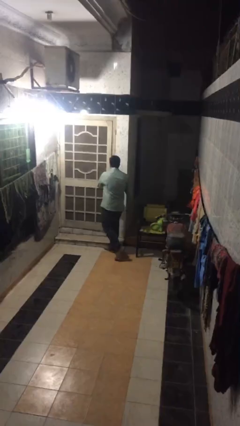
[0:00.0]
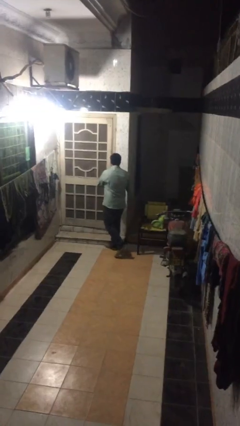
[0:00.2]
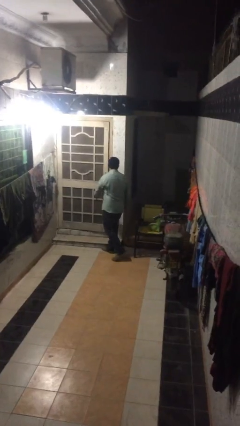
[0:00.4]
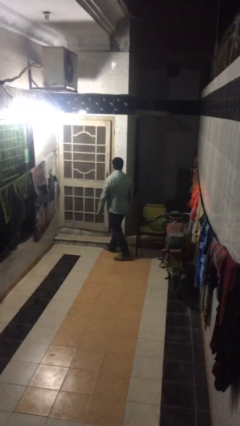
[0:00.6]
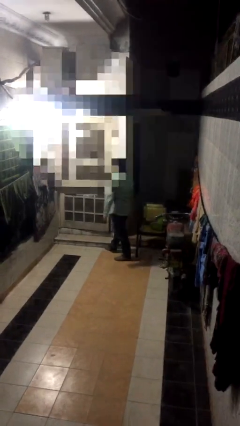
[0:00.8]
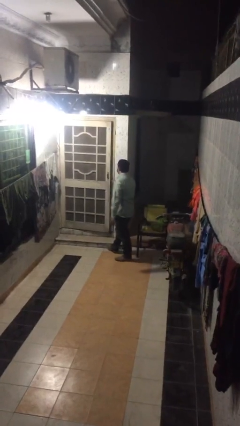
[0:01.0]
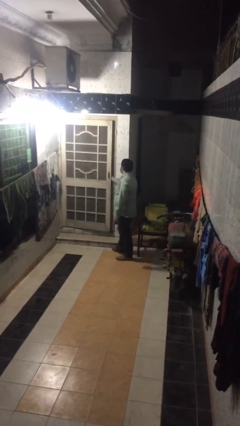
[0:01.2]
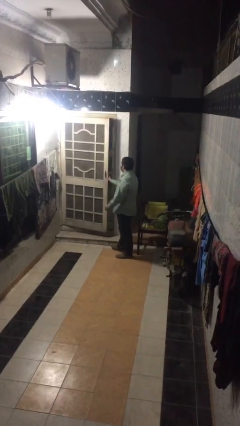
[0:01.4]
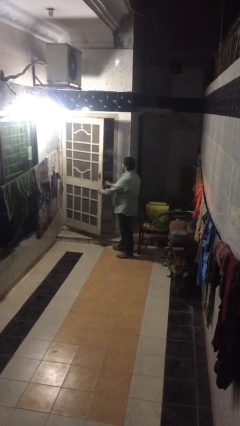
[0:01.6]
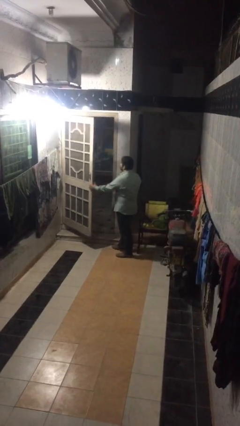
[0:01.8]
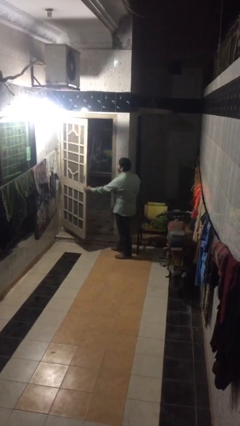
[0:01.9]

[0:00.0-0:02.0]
person opens facility door

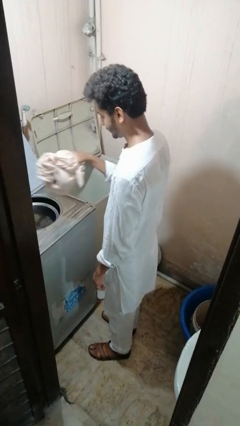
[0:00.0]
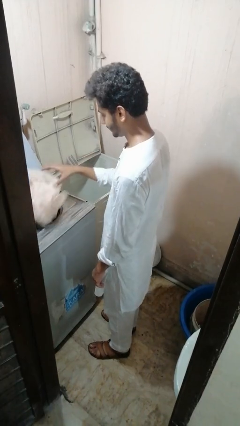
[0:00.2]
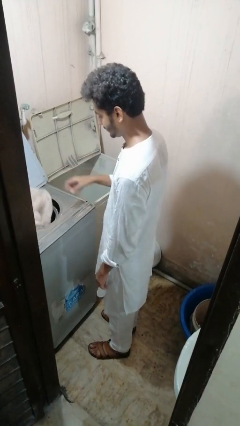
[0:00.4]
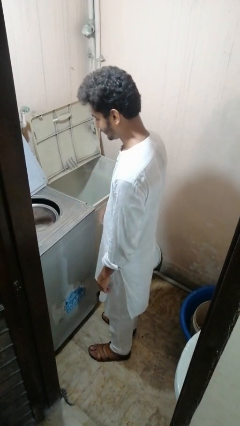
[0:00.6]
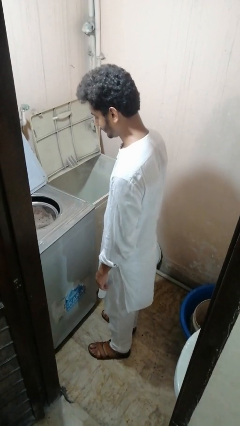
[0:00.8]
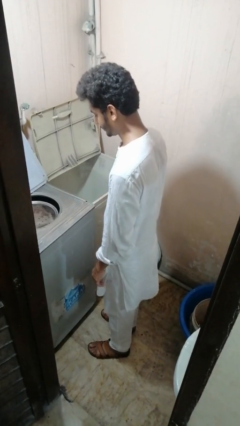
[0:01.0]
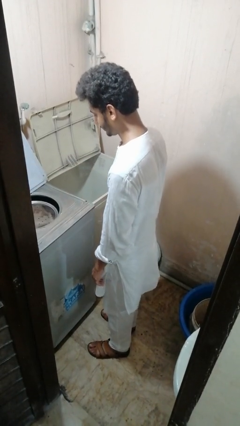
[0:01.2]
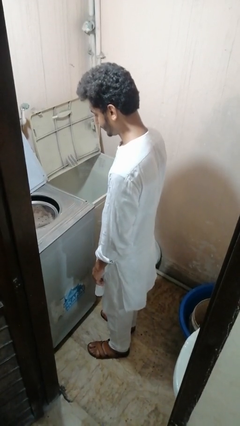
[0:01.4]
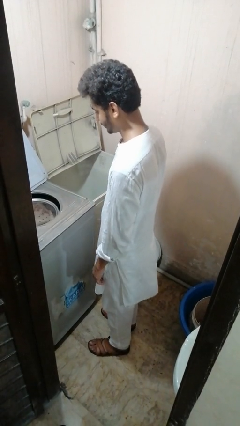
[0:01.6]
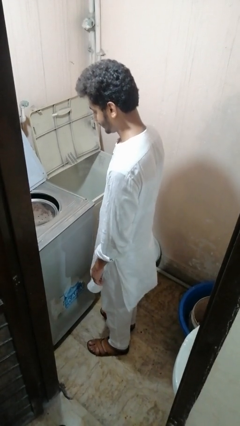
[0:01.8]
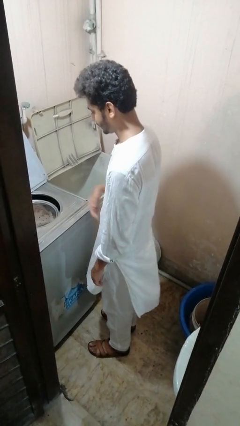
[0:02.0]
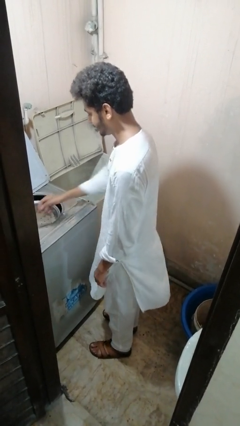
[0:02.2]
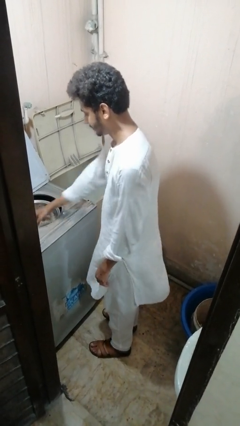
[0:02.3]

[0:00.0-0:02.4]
person loads dryer

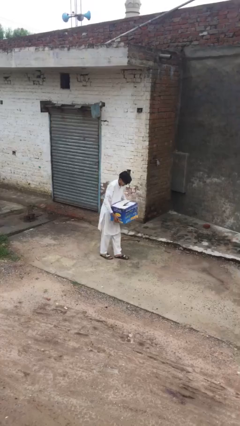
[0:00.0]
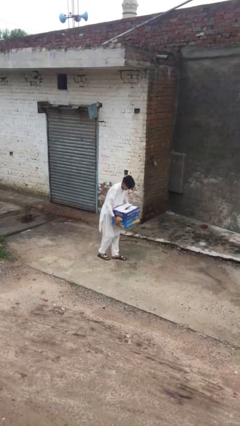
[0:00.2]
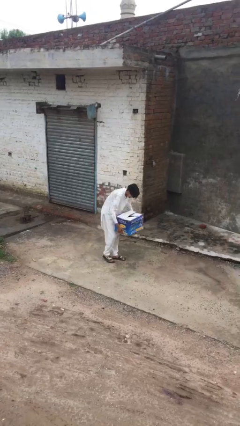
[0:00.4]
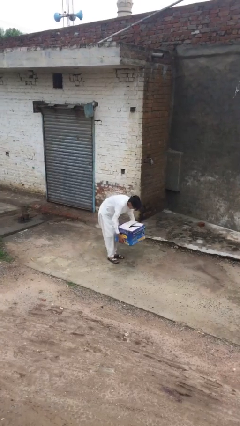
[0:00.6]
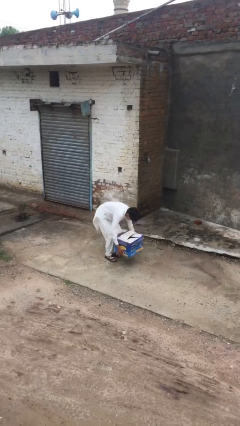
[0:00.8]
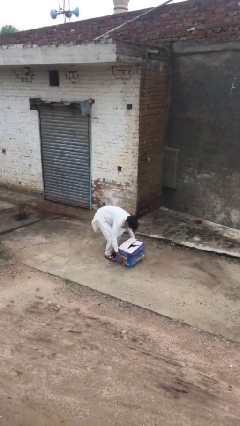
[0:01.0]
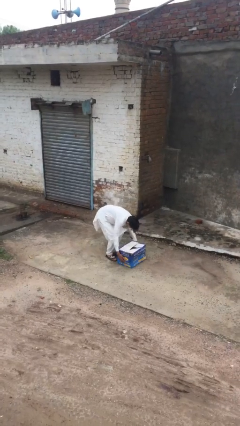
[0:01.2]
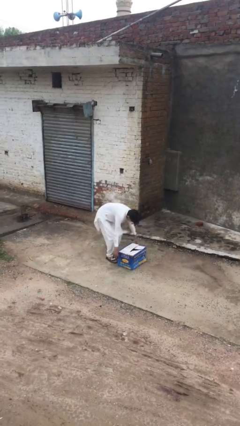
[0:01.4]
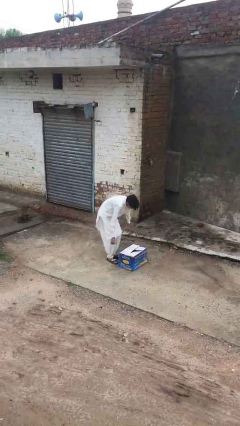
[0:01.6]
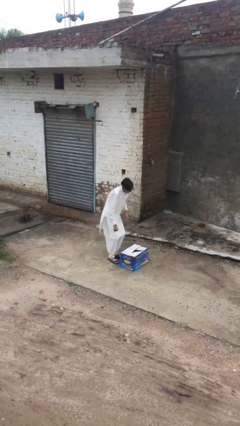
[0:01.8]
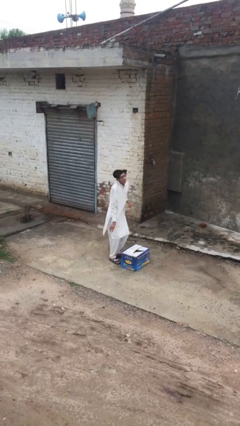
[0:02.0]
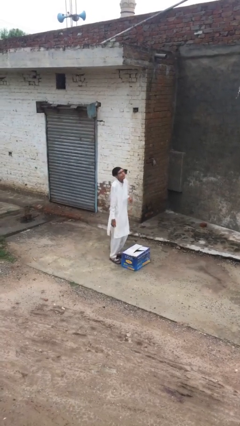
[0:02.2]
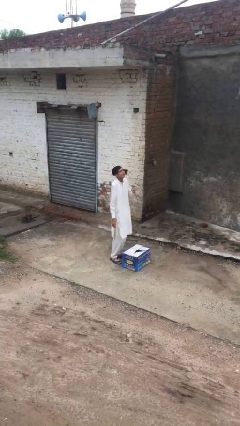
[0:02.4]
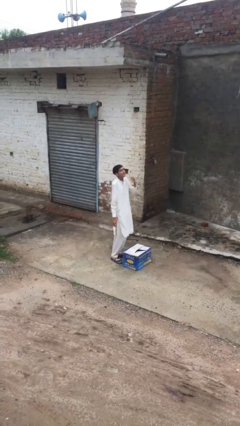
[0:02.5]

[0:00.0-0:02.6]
person puts down object on floor

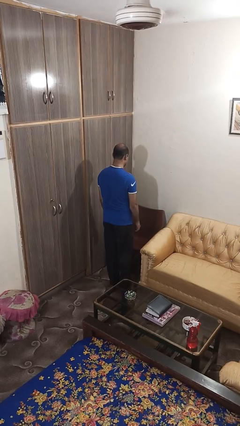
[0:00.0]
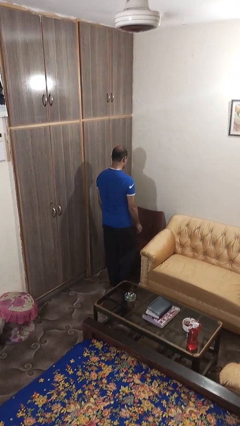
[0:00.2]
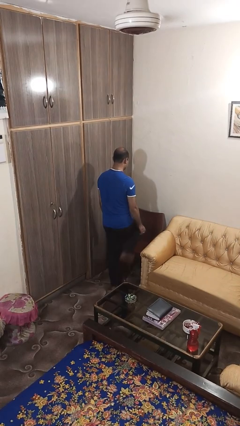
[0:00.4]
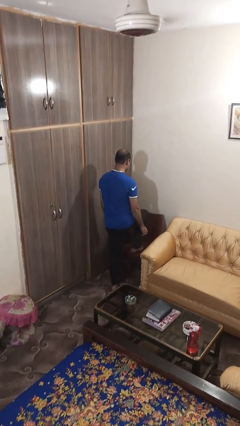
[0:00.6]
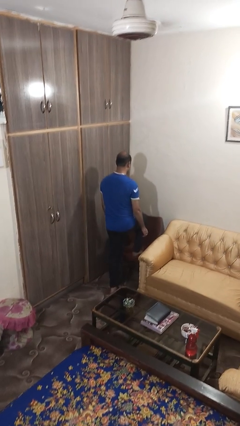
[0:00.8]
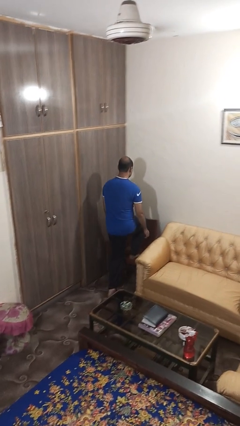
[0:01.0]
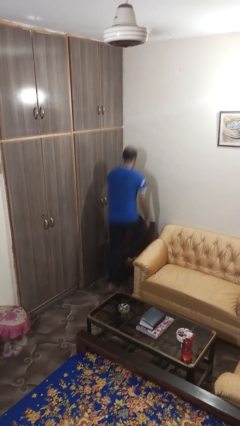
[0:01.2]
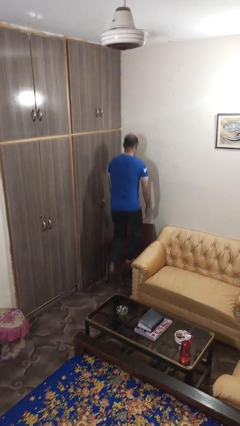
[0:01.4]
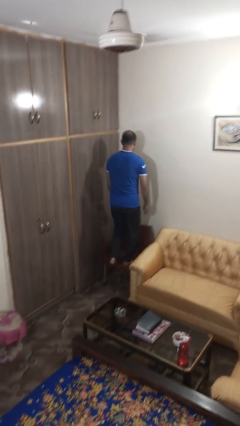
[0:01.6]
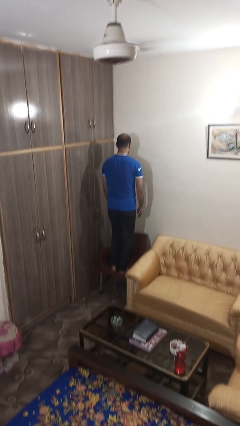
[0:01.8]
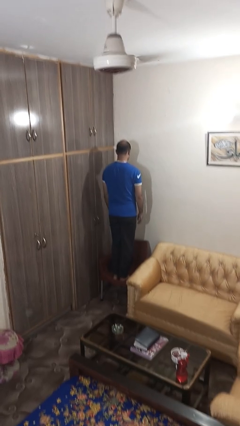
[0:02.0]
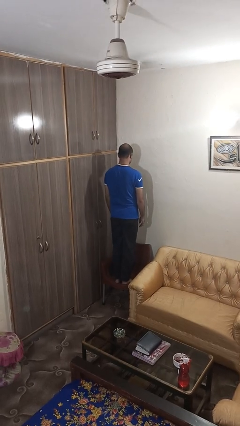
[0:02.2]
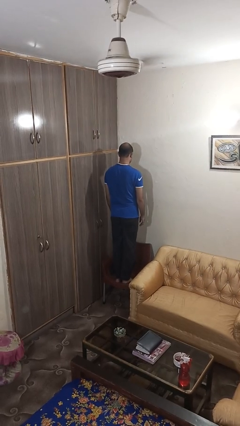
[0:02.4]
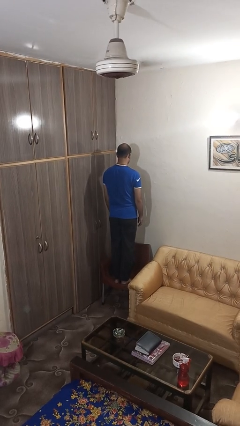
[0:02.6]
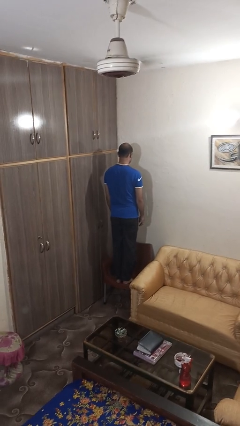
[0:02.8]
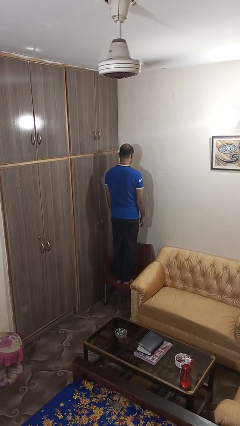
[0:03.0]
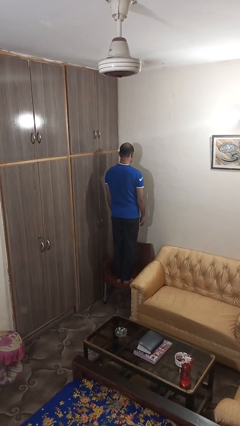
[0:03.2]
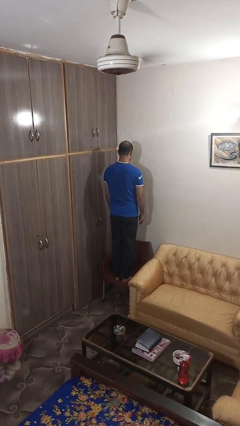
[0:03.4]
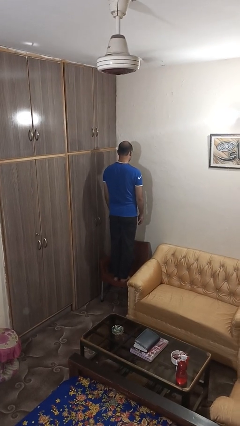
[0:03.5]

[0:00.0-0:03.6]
person climbs on chair

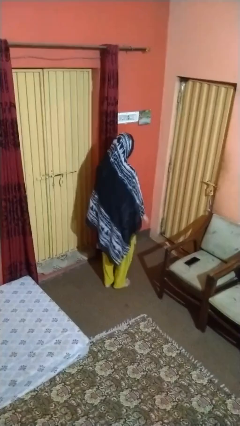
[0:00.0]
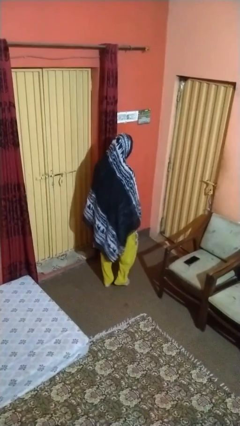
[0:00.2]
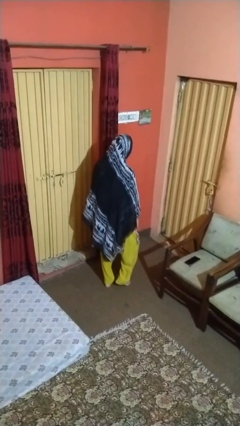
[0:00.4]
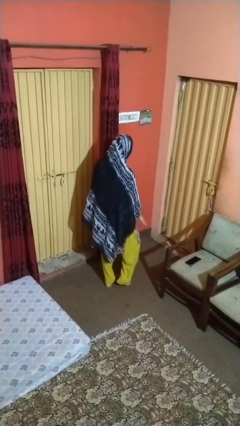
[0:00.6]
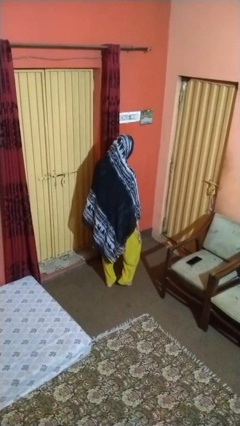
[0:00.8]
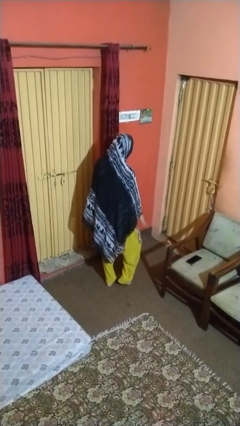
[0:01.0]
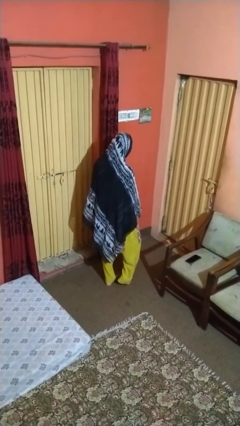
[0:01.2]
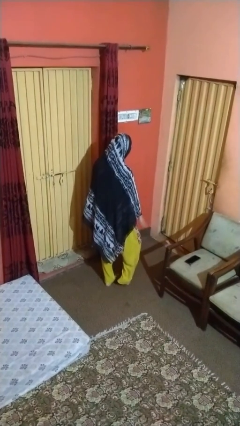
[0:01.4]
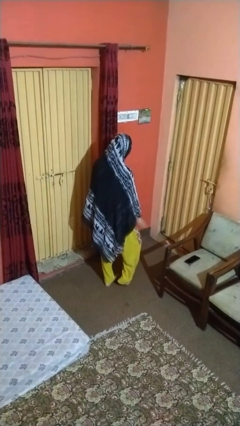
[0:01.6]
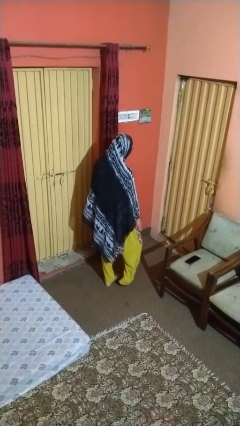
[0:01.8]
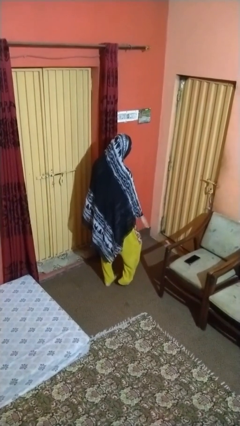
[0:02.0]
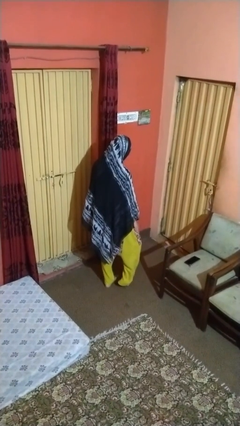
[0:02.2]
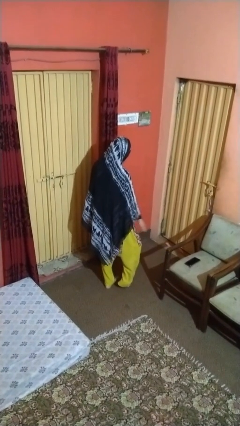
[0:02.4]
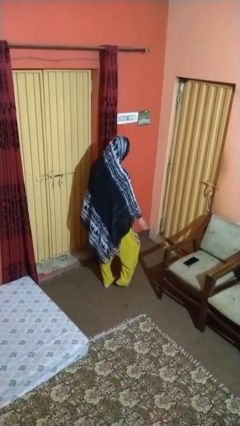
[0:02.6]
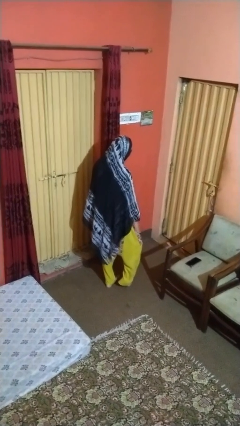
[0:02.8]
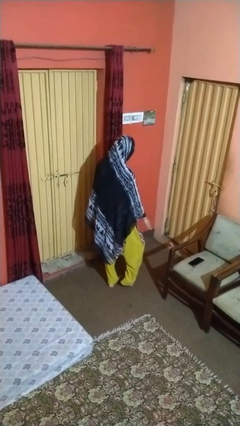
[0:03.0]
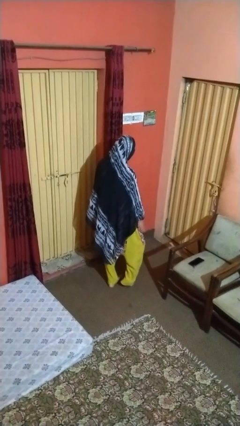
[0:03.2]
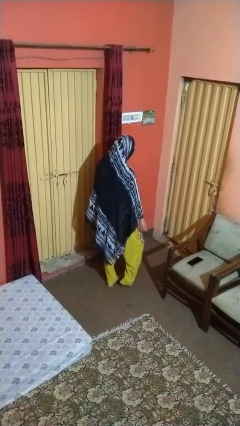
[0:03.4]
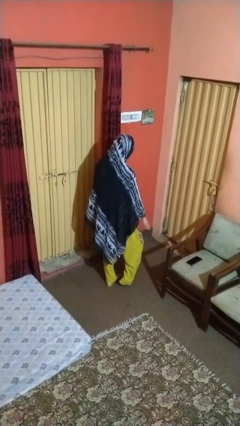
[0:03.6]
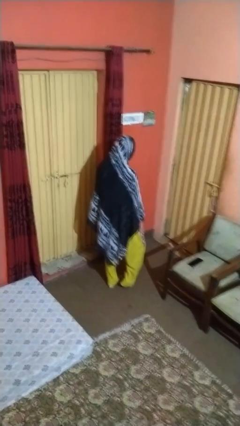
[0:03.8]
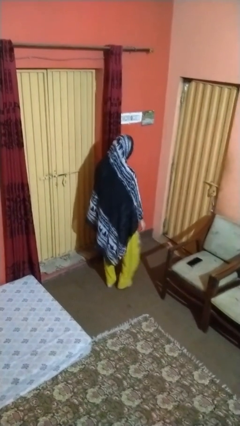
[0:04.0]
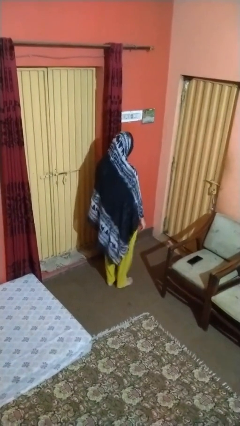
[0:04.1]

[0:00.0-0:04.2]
person slaps hands on thighs

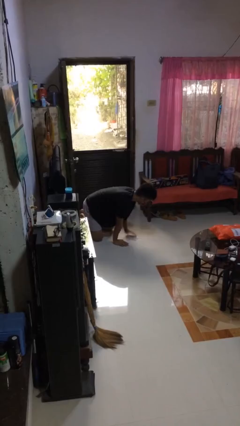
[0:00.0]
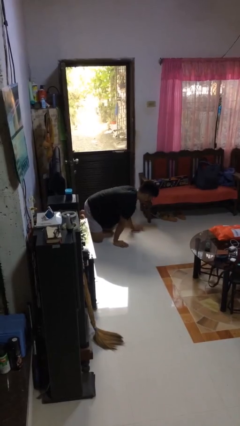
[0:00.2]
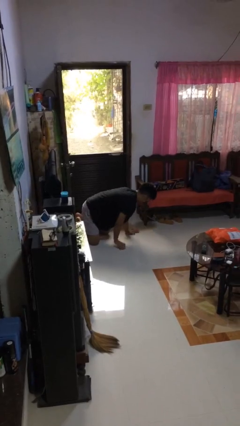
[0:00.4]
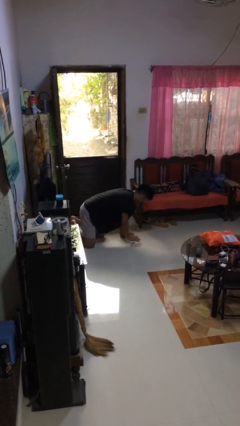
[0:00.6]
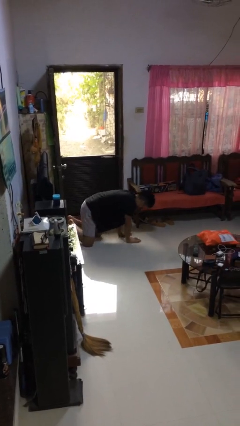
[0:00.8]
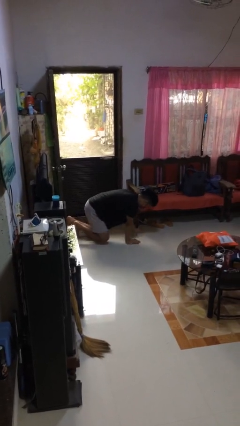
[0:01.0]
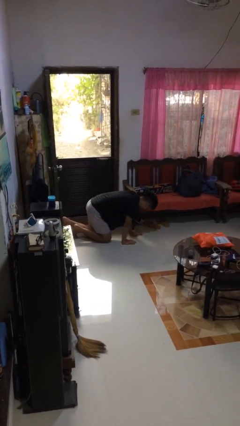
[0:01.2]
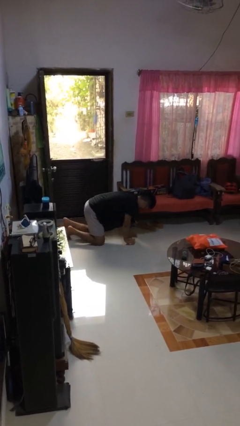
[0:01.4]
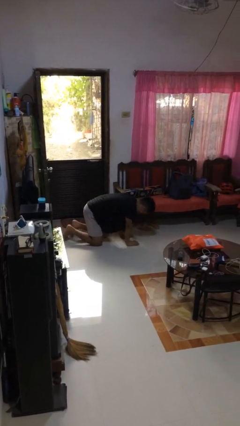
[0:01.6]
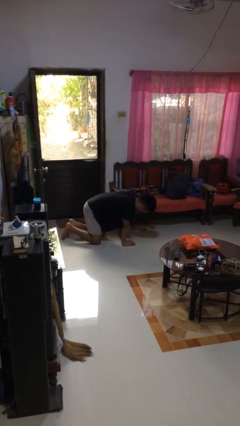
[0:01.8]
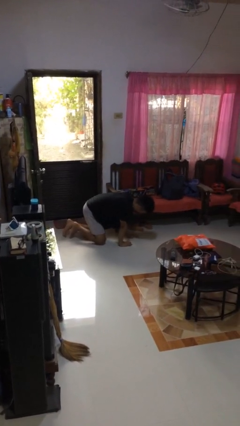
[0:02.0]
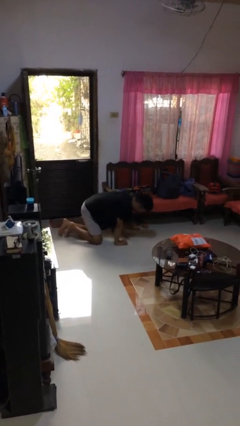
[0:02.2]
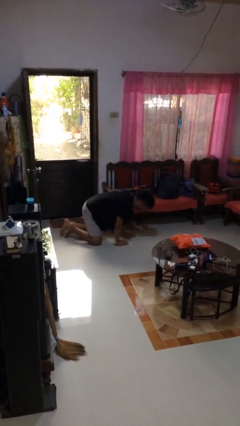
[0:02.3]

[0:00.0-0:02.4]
person crawls

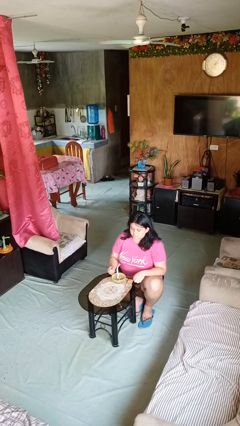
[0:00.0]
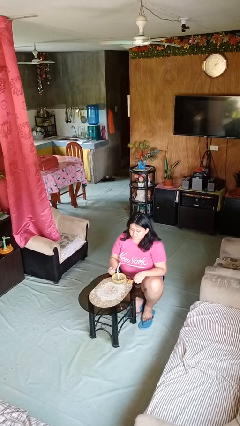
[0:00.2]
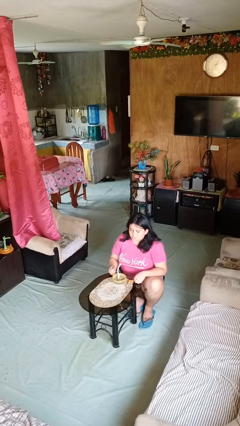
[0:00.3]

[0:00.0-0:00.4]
person extinguishes candle
